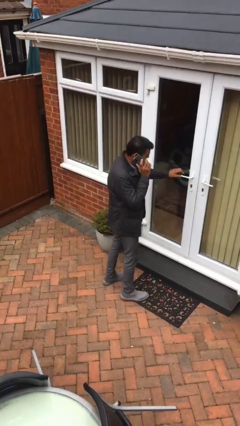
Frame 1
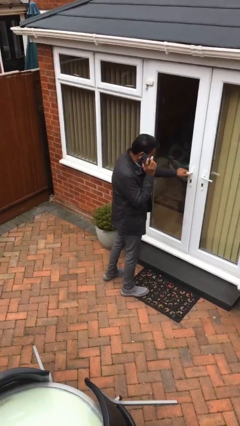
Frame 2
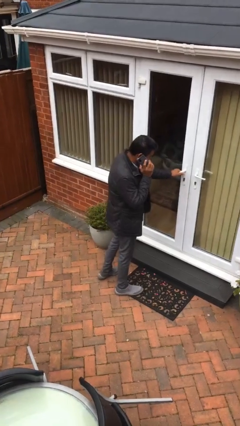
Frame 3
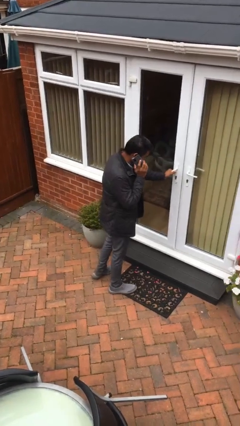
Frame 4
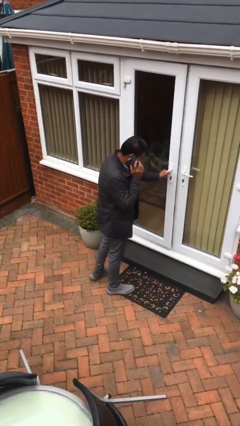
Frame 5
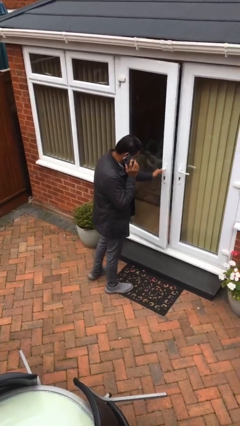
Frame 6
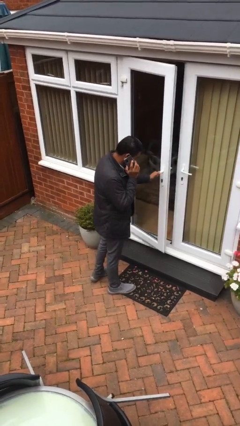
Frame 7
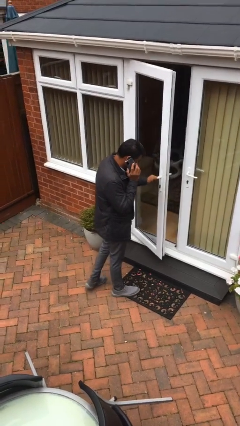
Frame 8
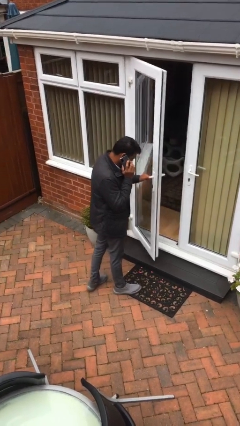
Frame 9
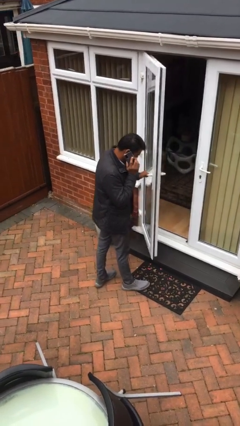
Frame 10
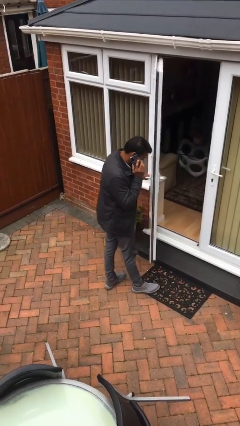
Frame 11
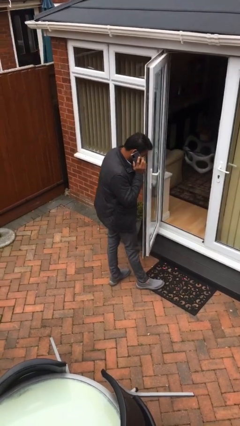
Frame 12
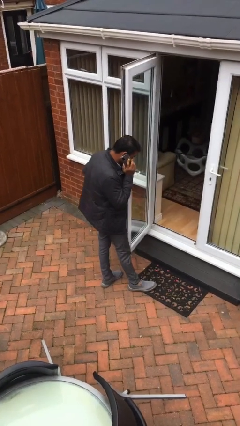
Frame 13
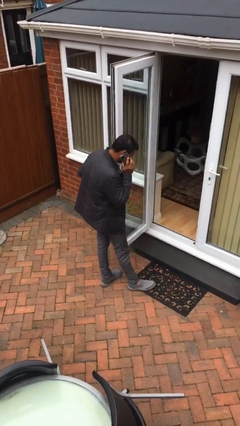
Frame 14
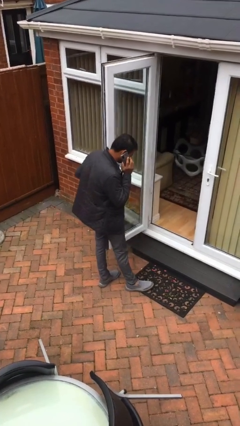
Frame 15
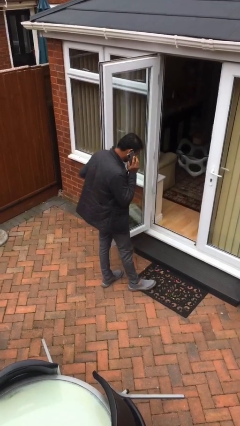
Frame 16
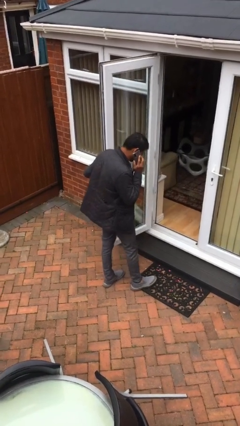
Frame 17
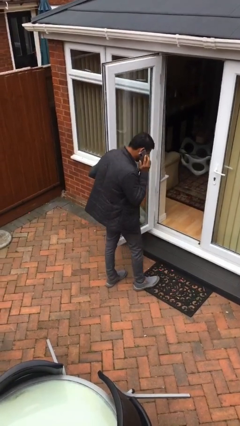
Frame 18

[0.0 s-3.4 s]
person opens facility door

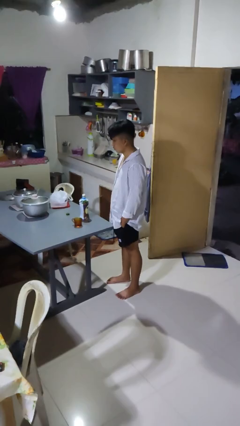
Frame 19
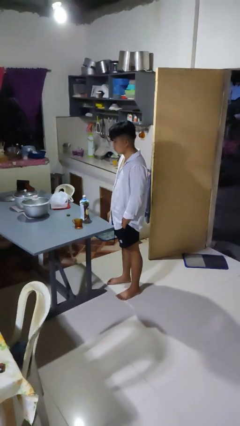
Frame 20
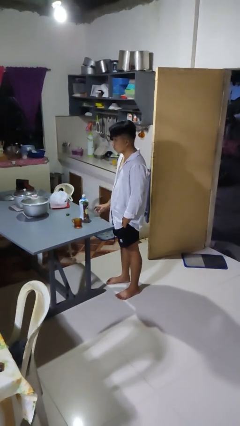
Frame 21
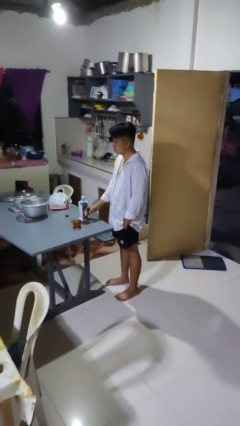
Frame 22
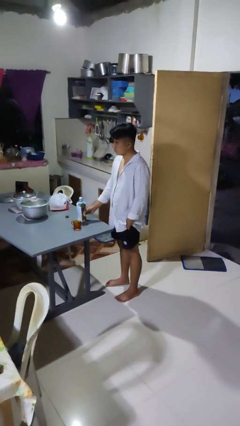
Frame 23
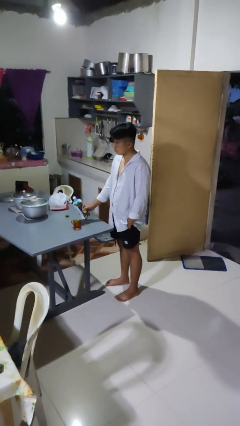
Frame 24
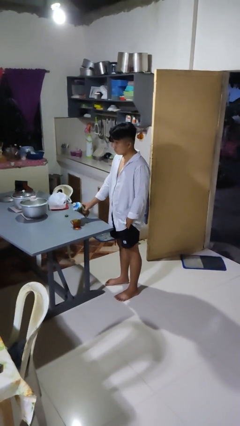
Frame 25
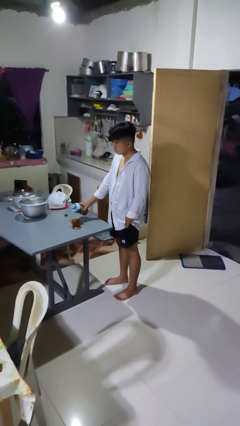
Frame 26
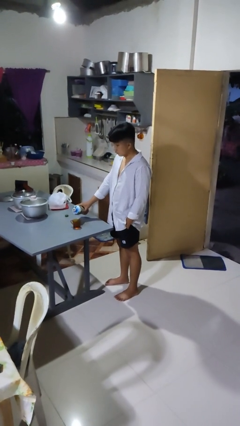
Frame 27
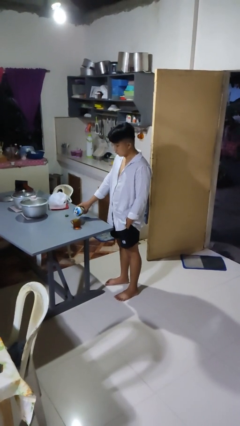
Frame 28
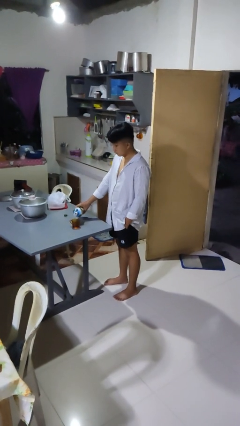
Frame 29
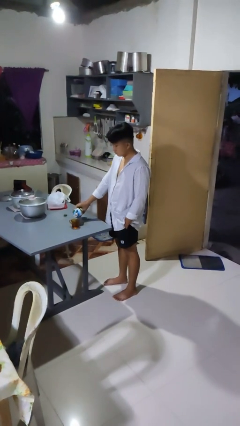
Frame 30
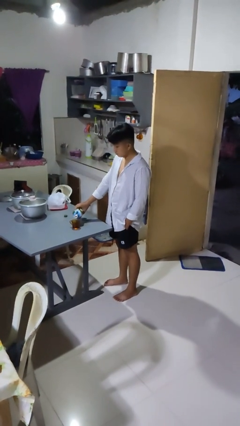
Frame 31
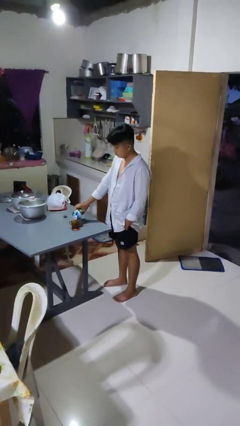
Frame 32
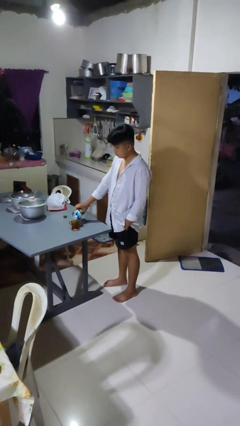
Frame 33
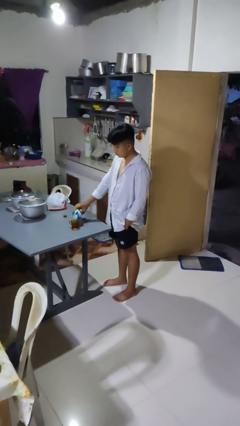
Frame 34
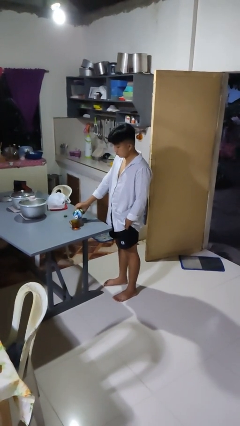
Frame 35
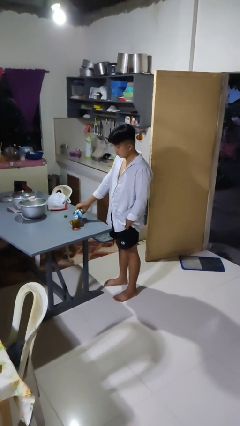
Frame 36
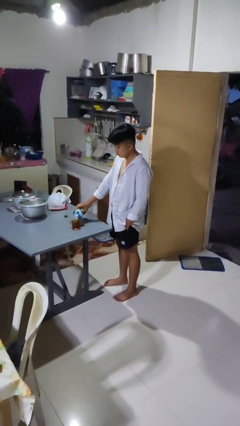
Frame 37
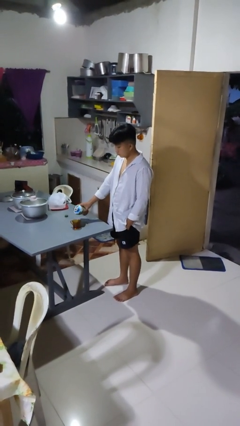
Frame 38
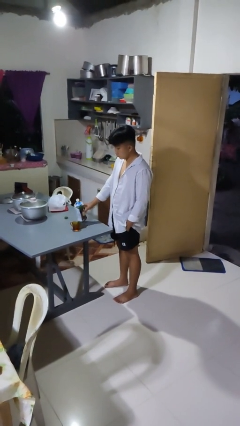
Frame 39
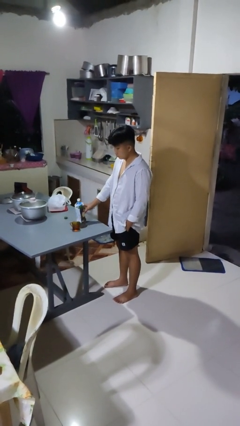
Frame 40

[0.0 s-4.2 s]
person pours liquid into cup

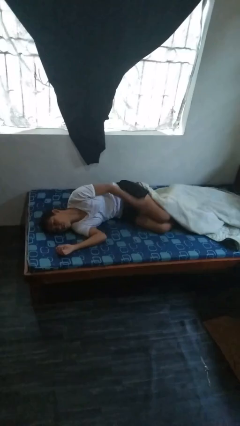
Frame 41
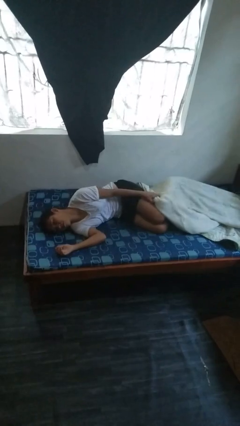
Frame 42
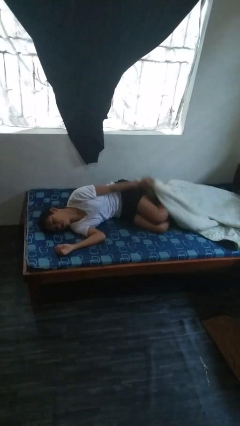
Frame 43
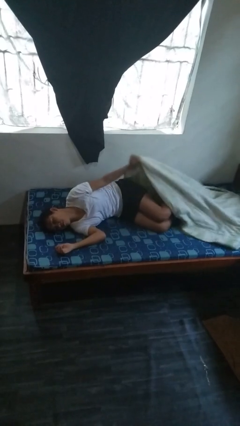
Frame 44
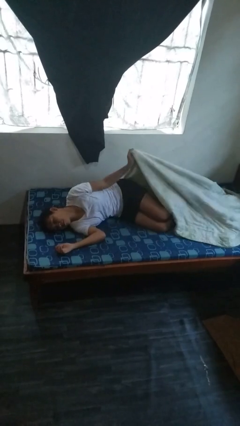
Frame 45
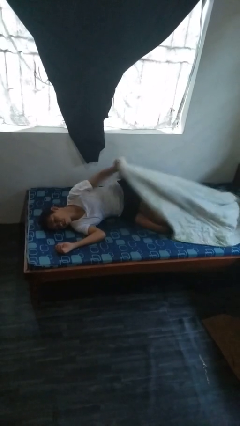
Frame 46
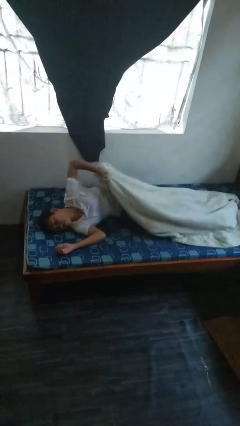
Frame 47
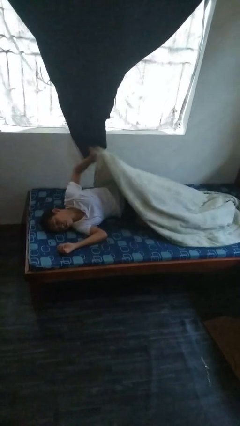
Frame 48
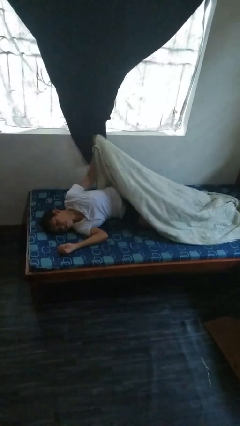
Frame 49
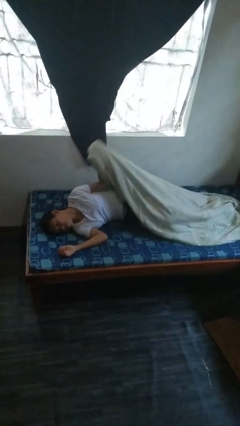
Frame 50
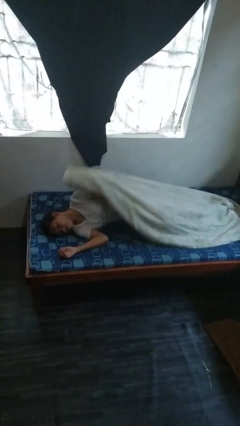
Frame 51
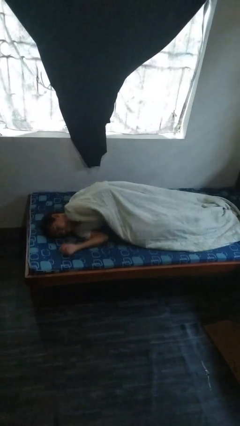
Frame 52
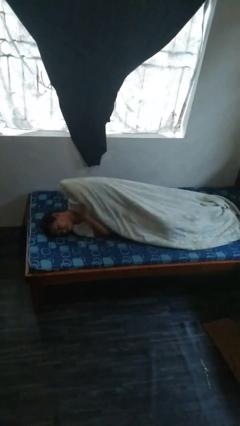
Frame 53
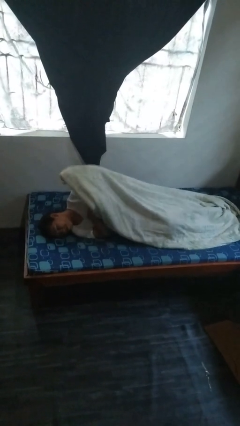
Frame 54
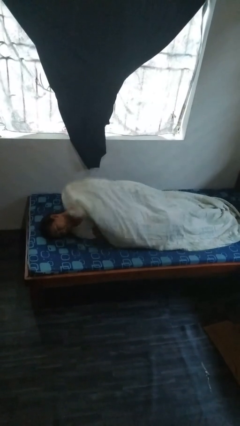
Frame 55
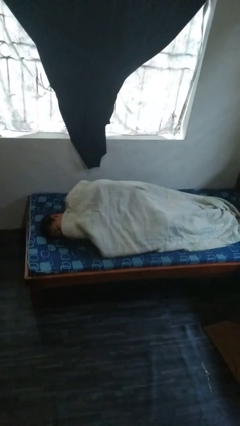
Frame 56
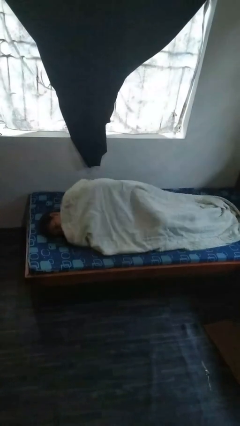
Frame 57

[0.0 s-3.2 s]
person covers with bedsheets

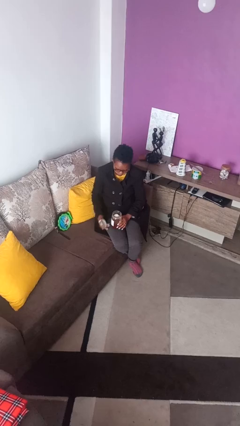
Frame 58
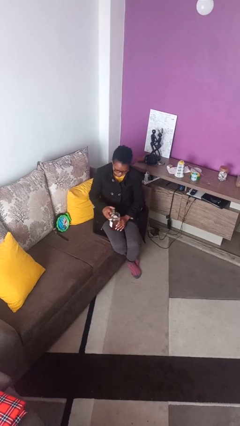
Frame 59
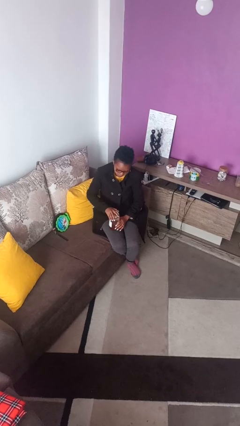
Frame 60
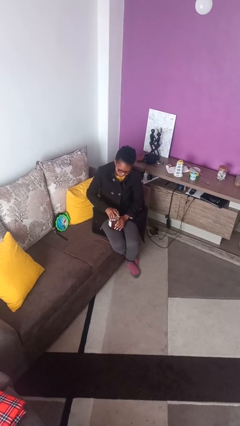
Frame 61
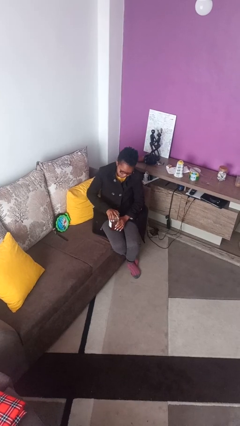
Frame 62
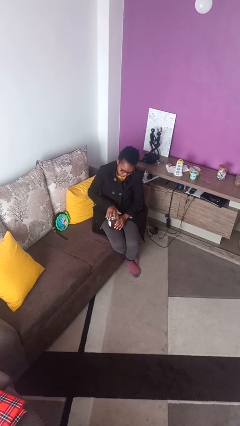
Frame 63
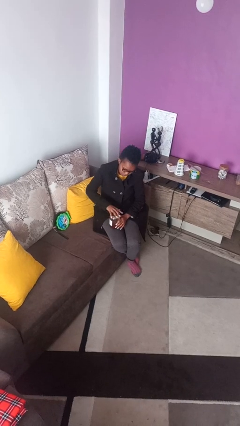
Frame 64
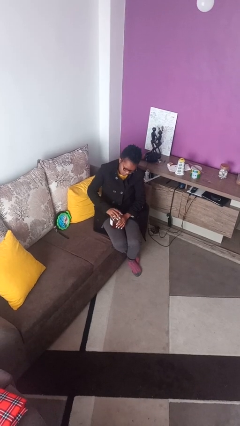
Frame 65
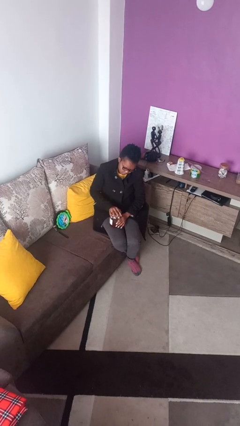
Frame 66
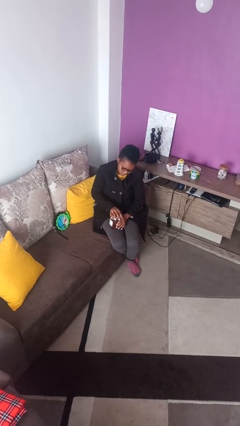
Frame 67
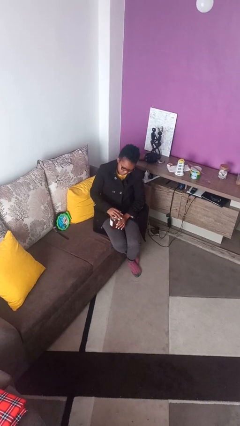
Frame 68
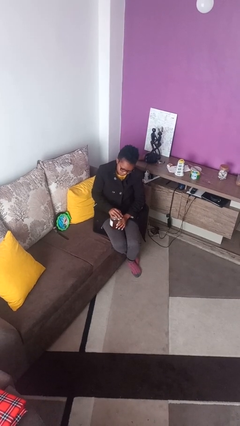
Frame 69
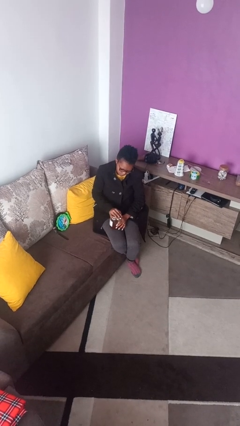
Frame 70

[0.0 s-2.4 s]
person closes jar

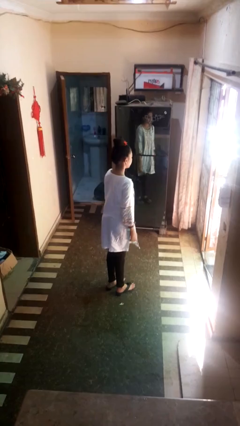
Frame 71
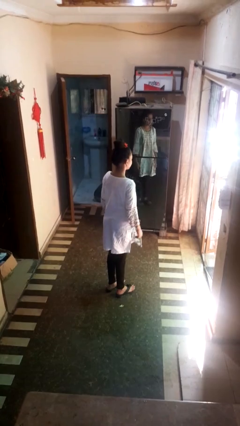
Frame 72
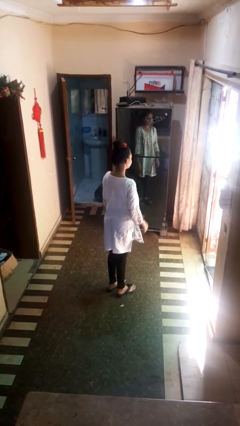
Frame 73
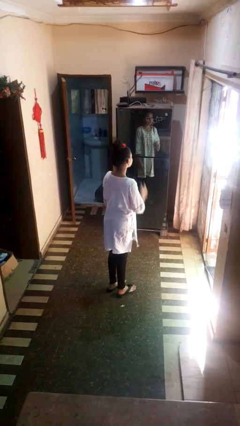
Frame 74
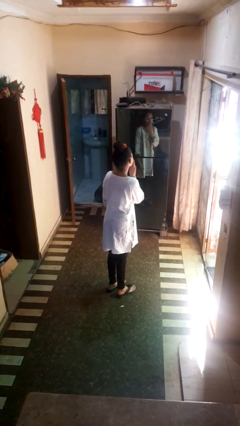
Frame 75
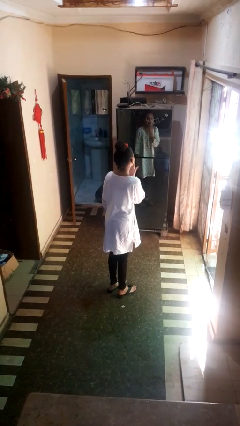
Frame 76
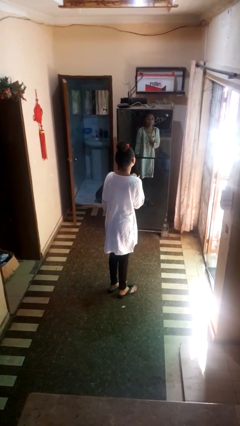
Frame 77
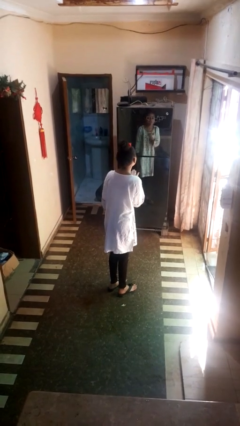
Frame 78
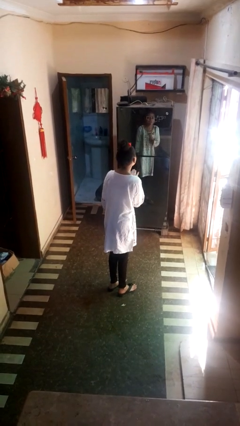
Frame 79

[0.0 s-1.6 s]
person gestures blow kiss

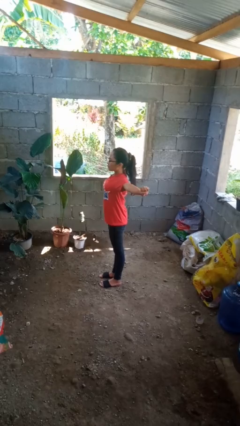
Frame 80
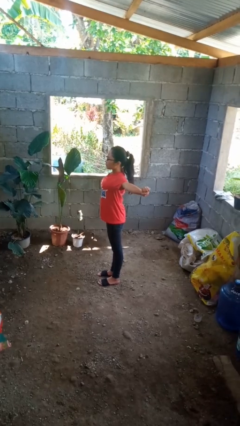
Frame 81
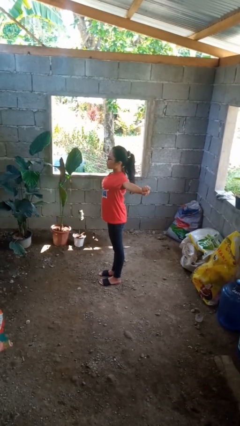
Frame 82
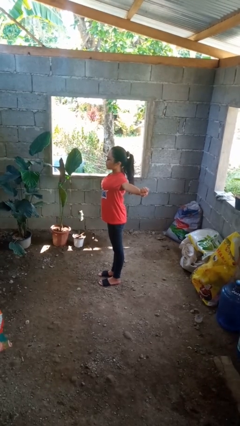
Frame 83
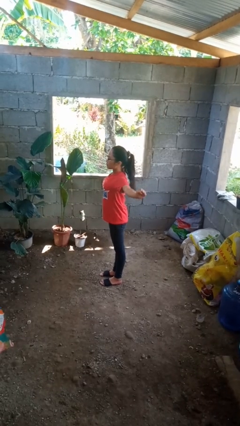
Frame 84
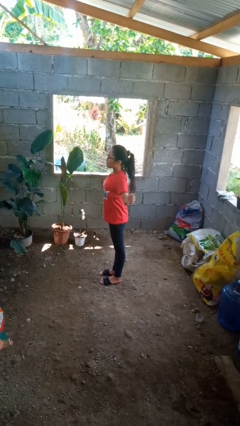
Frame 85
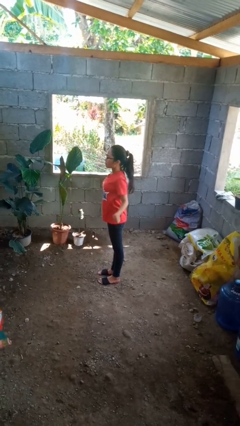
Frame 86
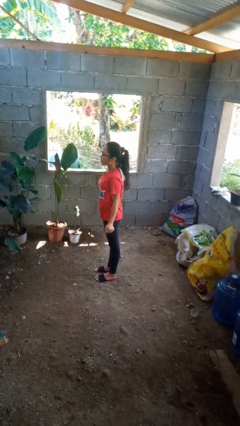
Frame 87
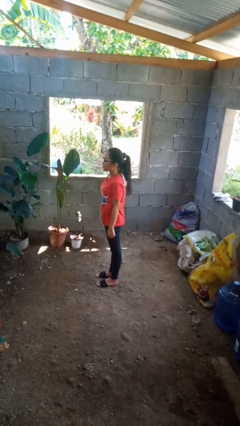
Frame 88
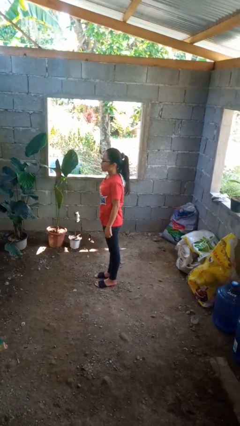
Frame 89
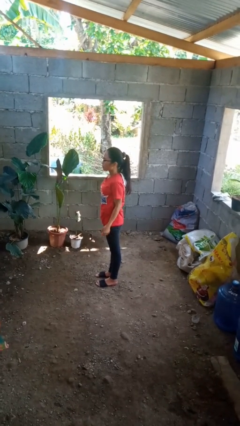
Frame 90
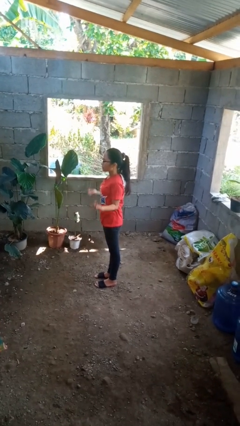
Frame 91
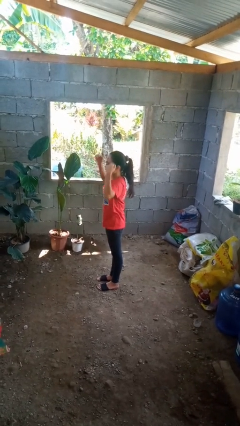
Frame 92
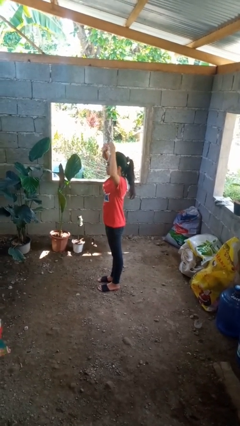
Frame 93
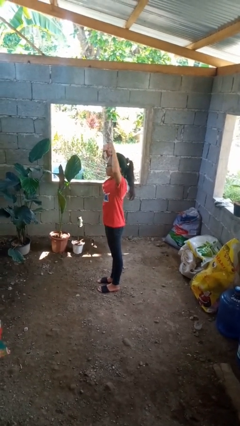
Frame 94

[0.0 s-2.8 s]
person stretches arms to side
